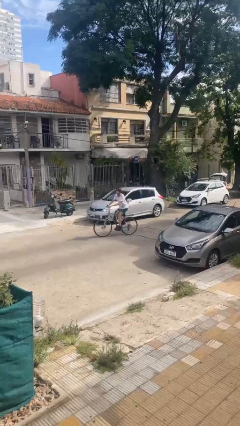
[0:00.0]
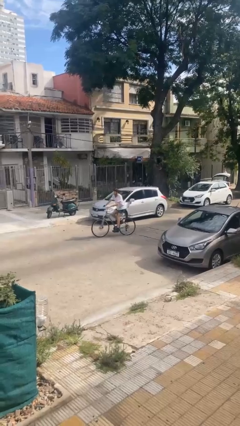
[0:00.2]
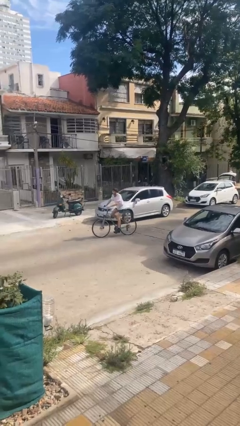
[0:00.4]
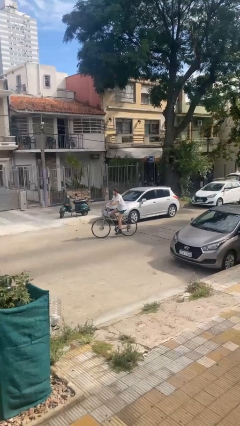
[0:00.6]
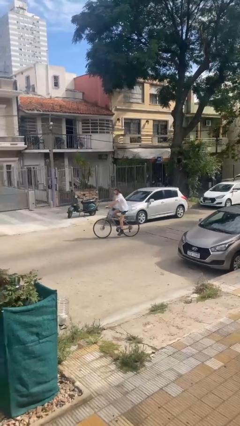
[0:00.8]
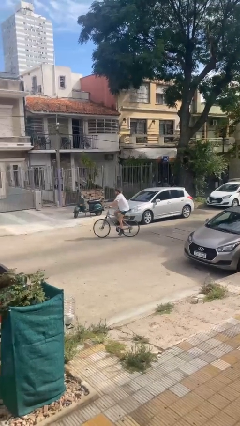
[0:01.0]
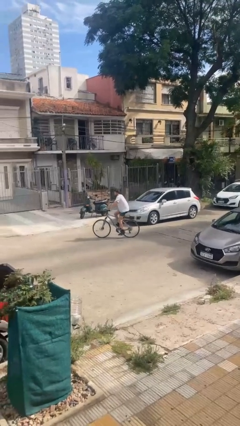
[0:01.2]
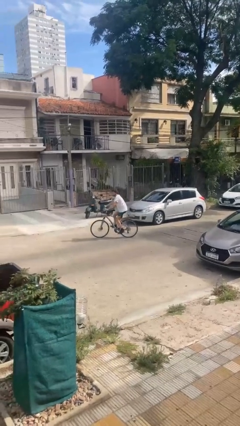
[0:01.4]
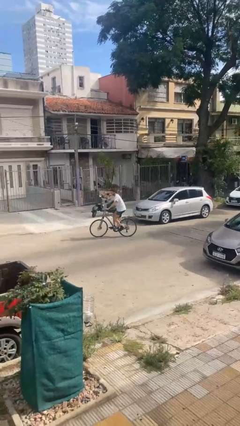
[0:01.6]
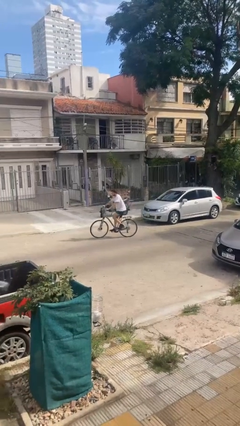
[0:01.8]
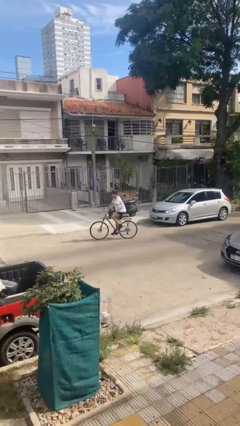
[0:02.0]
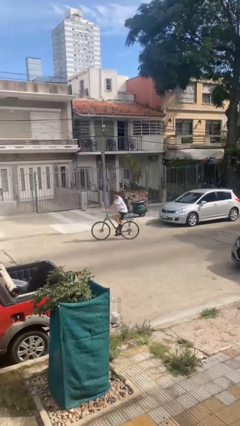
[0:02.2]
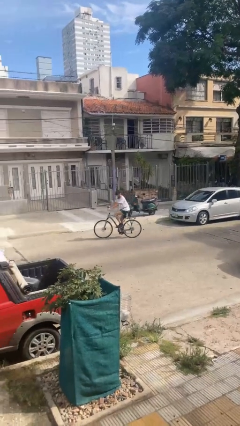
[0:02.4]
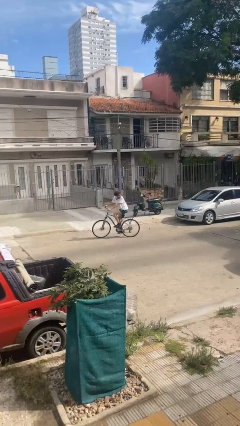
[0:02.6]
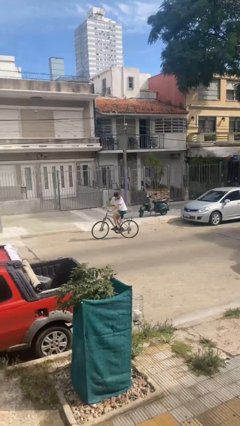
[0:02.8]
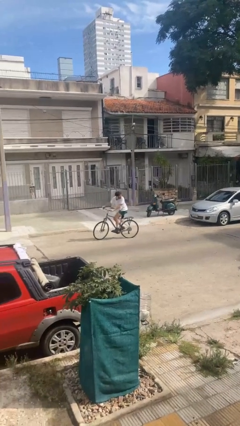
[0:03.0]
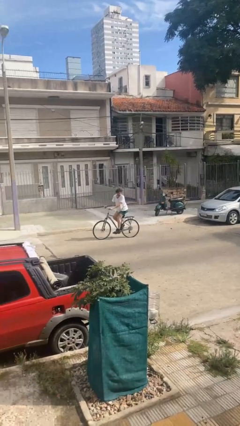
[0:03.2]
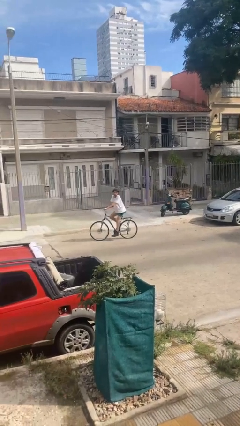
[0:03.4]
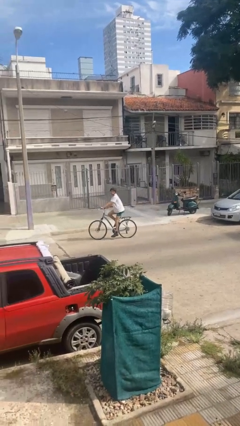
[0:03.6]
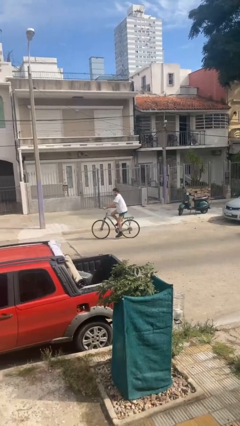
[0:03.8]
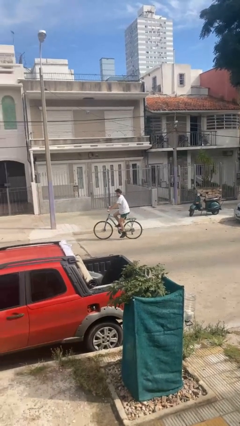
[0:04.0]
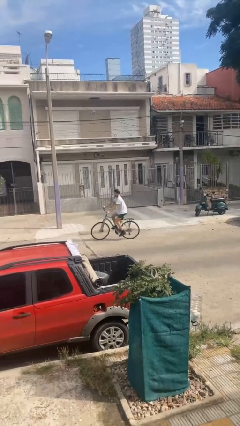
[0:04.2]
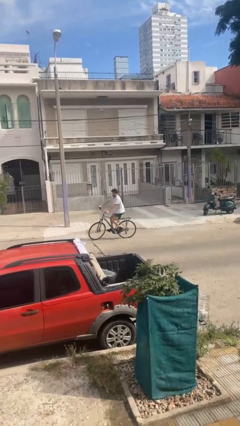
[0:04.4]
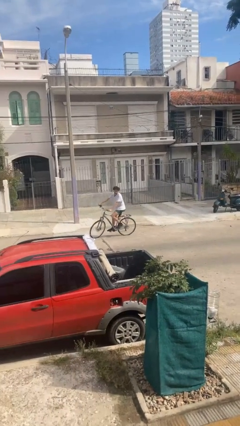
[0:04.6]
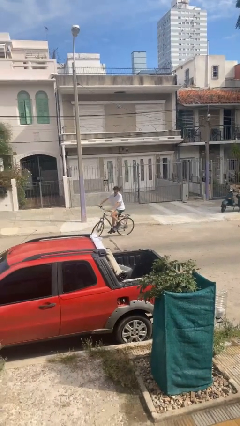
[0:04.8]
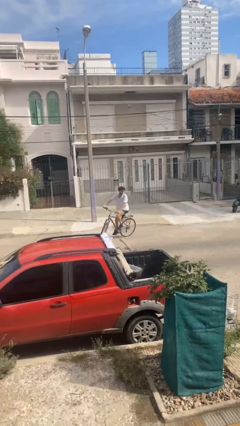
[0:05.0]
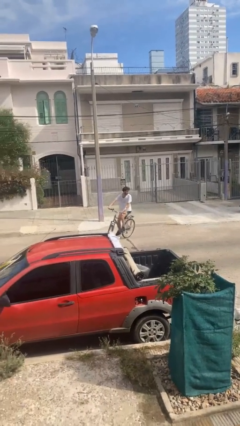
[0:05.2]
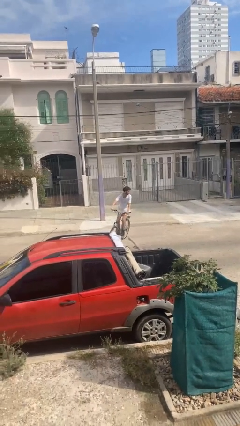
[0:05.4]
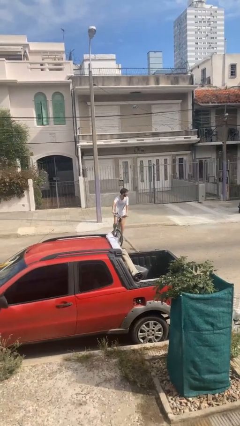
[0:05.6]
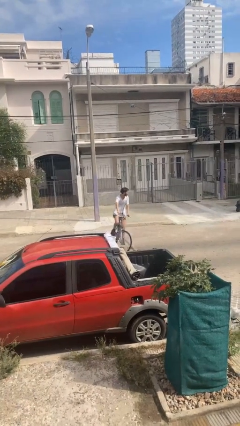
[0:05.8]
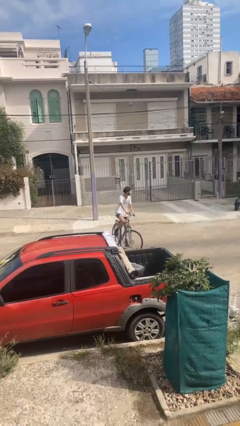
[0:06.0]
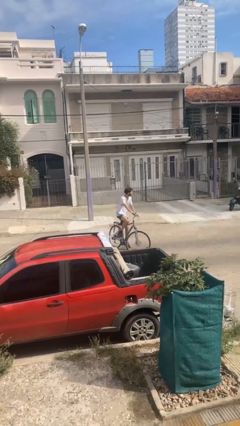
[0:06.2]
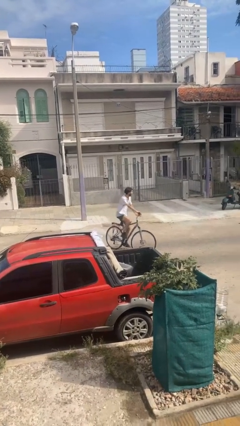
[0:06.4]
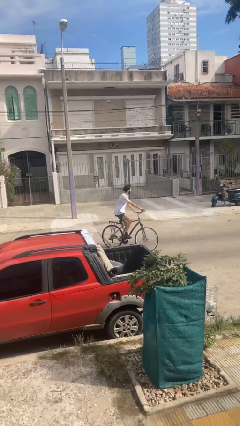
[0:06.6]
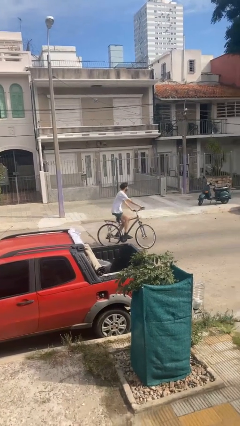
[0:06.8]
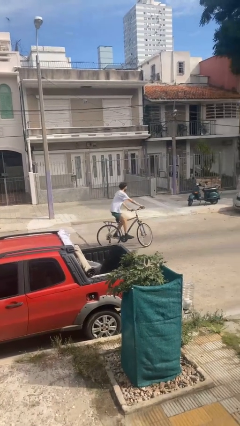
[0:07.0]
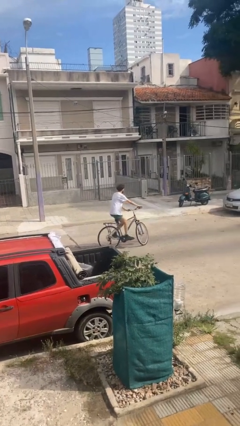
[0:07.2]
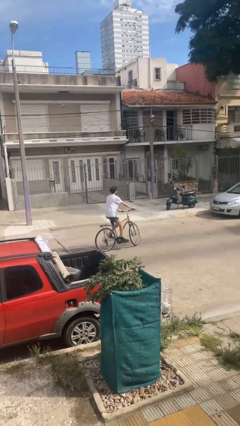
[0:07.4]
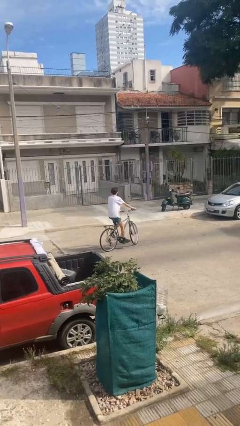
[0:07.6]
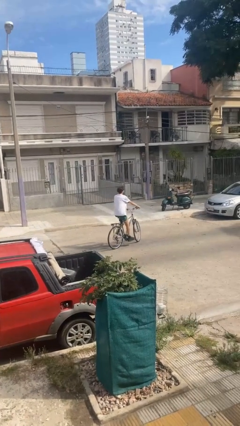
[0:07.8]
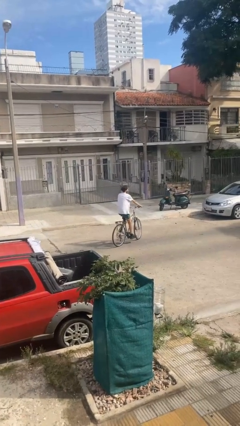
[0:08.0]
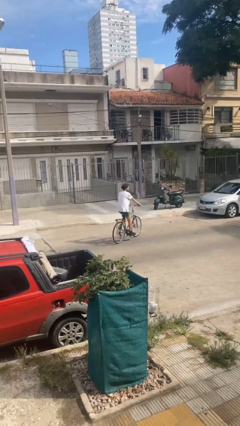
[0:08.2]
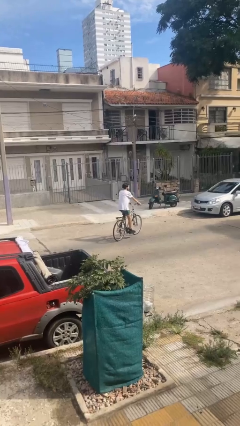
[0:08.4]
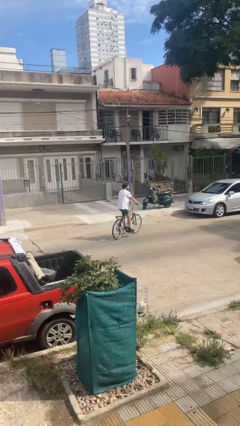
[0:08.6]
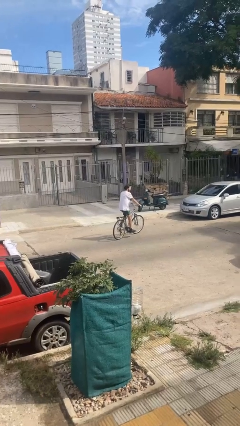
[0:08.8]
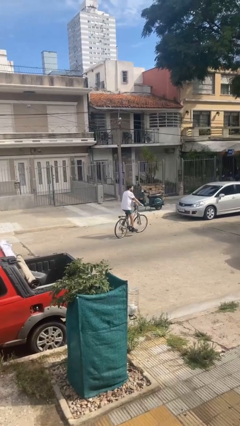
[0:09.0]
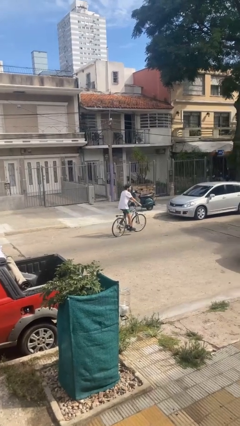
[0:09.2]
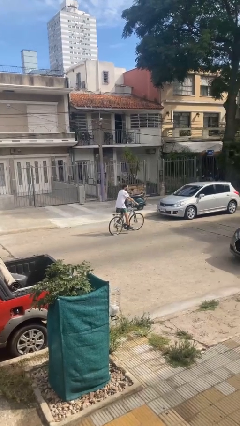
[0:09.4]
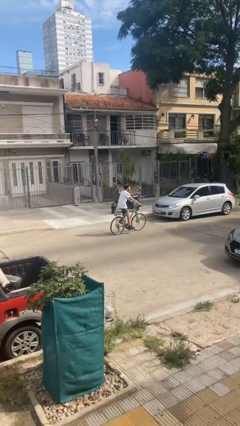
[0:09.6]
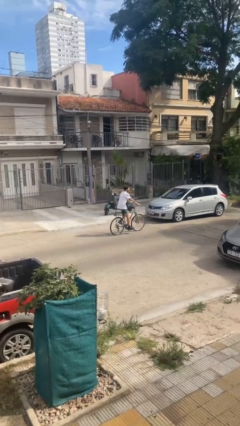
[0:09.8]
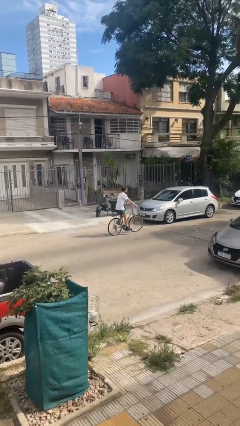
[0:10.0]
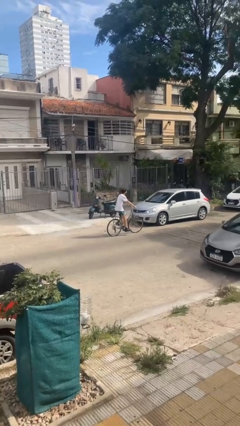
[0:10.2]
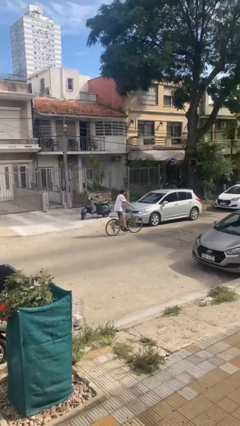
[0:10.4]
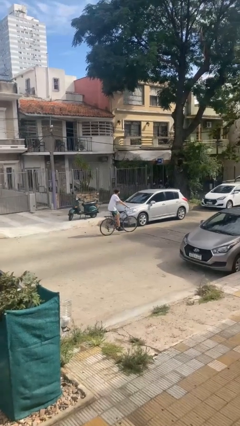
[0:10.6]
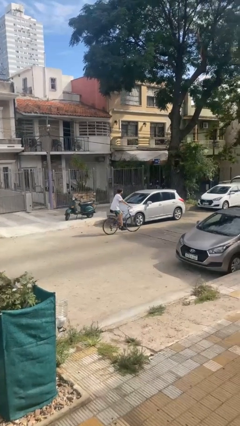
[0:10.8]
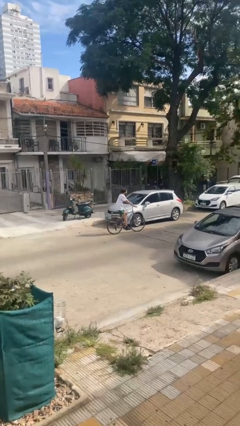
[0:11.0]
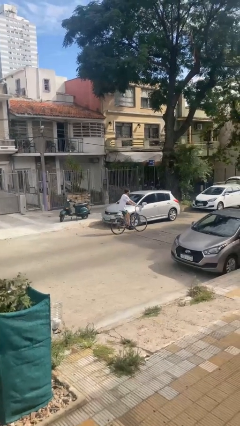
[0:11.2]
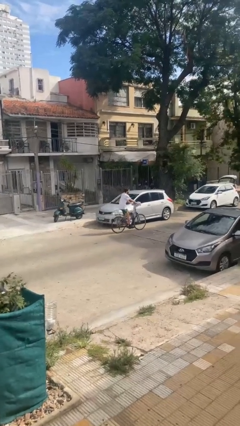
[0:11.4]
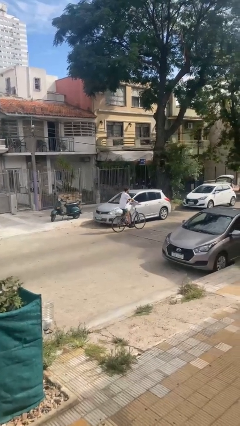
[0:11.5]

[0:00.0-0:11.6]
person rides bicycle

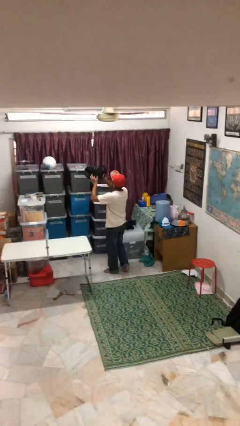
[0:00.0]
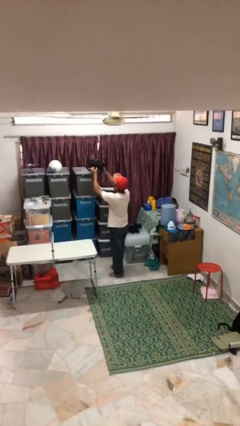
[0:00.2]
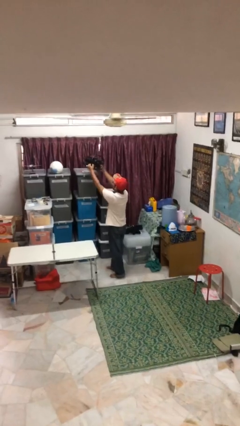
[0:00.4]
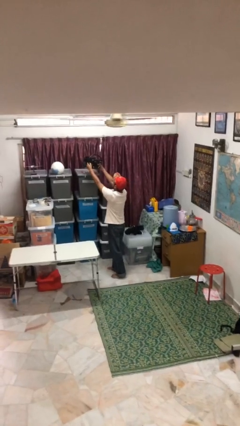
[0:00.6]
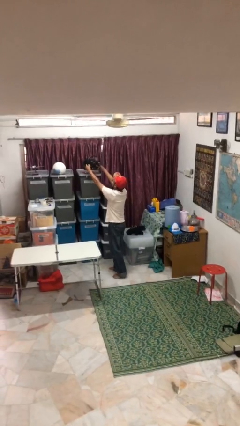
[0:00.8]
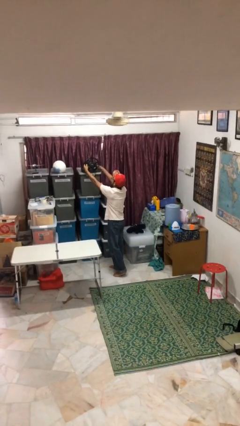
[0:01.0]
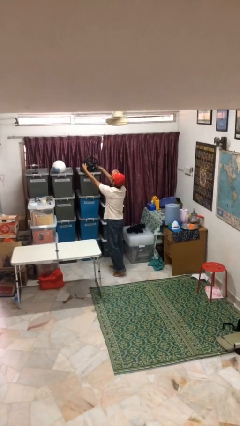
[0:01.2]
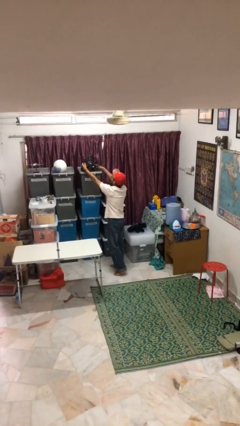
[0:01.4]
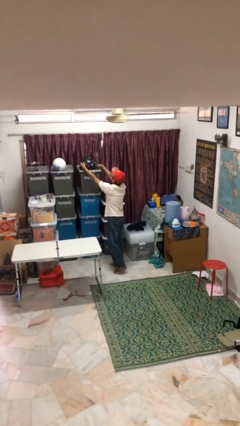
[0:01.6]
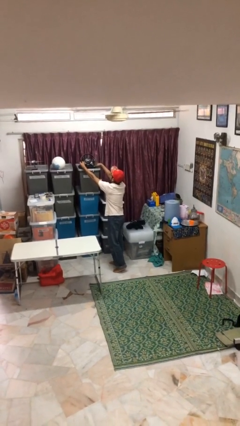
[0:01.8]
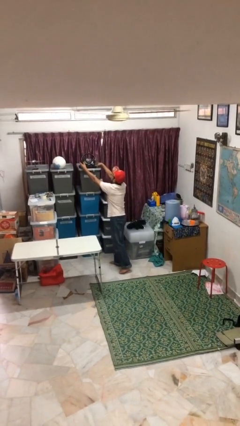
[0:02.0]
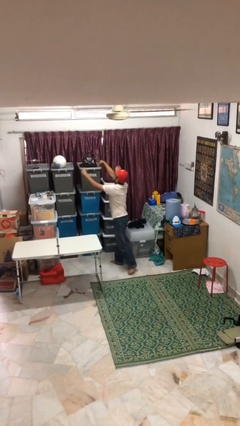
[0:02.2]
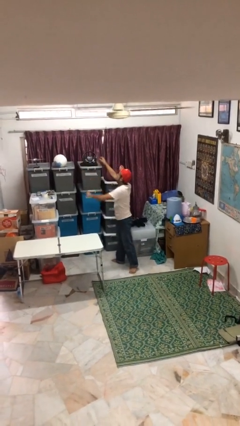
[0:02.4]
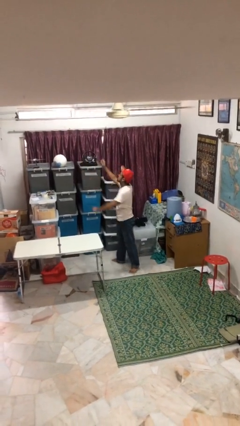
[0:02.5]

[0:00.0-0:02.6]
person puts down object on shelf

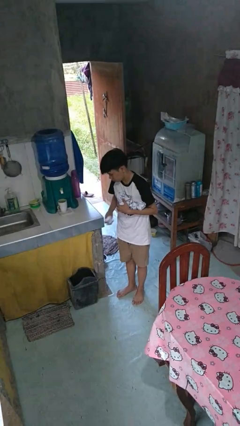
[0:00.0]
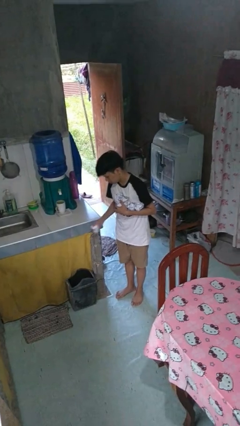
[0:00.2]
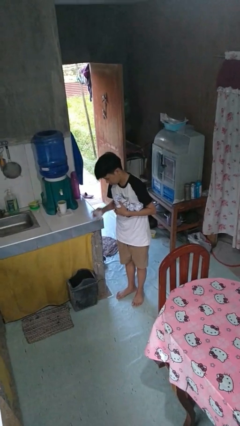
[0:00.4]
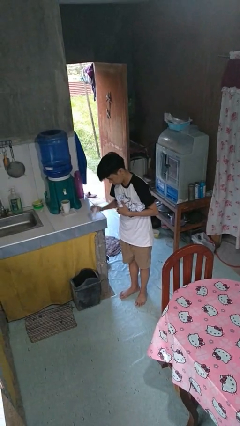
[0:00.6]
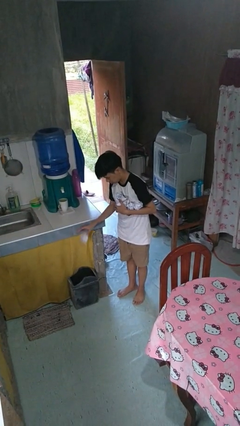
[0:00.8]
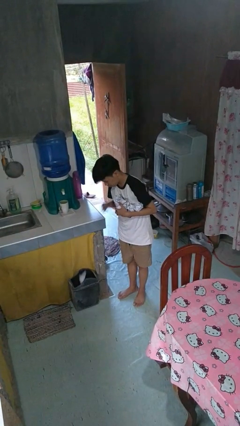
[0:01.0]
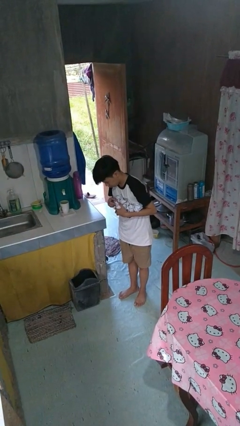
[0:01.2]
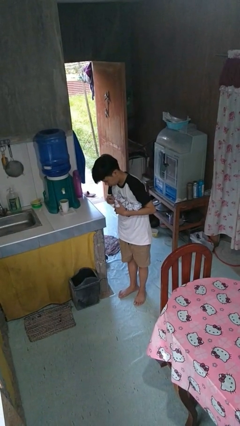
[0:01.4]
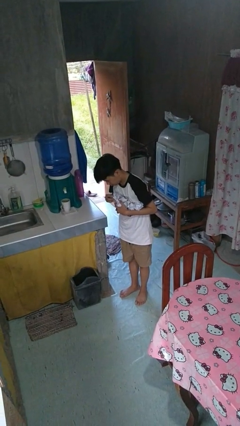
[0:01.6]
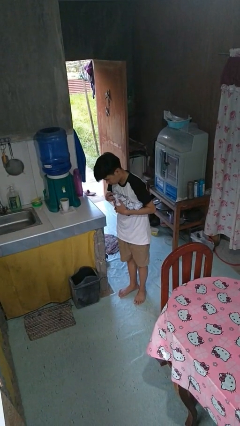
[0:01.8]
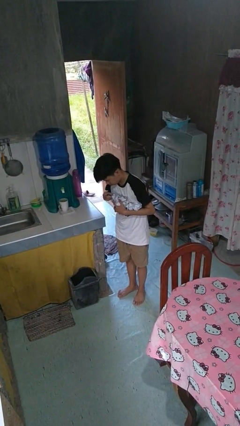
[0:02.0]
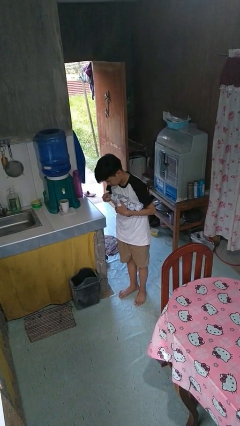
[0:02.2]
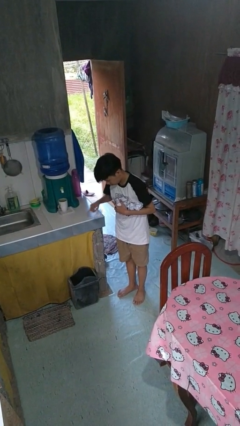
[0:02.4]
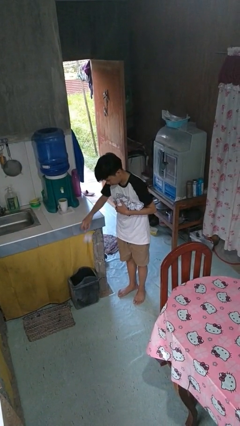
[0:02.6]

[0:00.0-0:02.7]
person discards trash

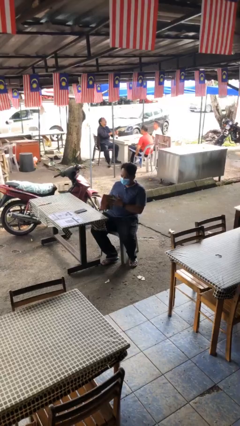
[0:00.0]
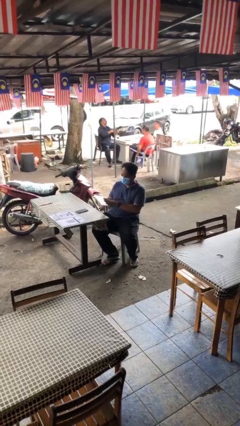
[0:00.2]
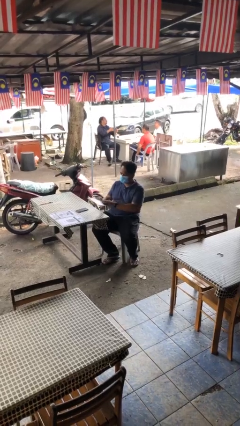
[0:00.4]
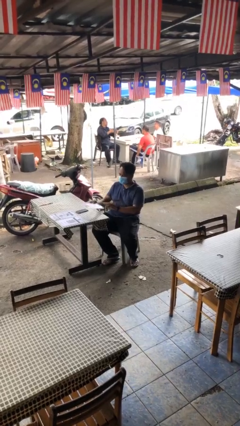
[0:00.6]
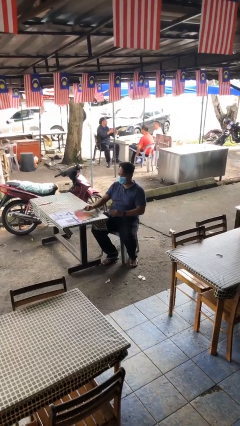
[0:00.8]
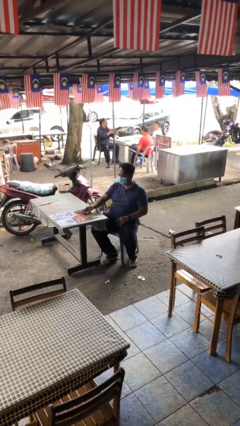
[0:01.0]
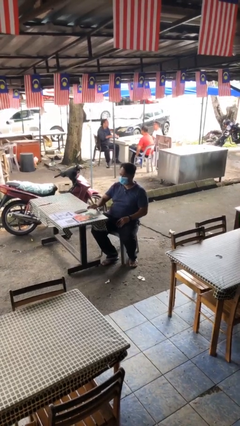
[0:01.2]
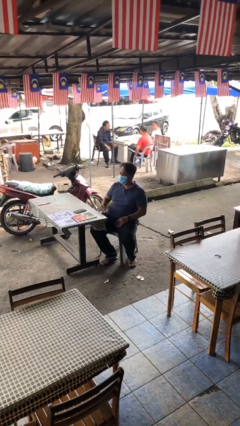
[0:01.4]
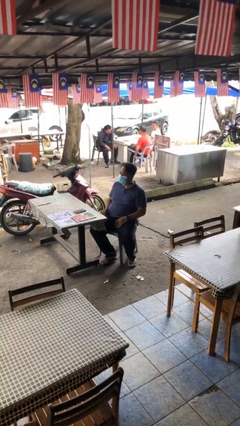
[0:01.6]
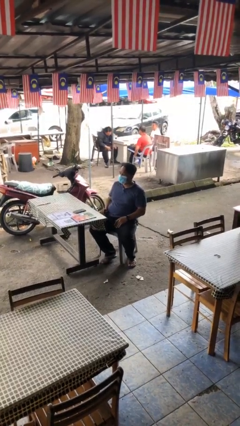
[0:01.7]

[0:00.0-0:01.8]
person puts down object on table
